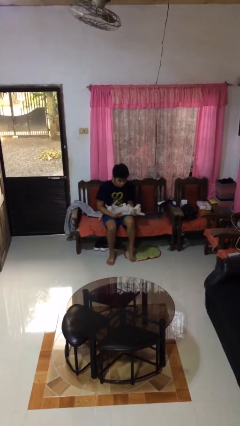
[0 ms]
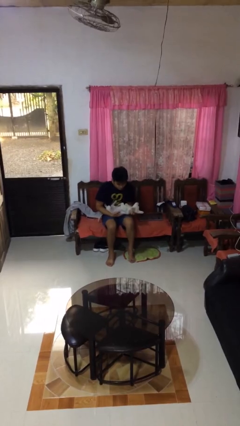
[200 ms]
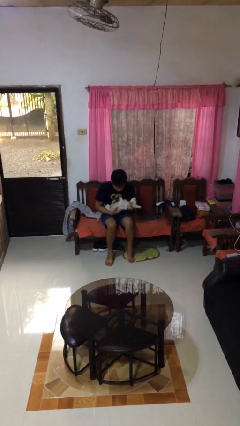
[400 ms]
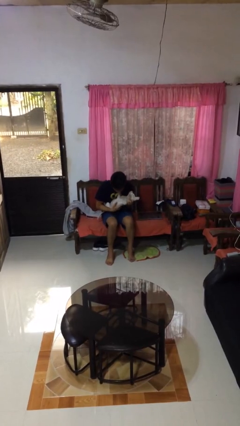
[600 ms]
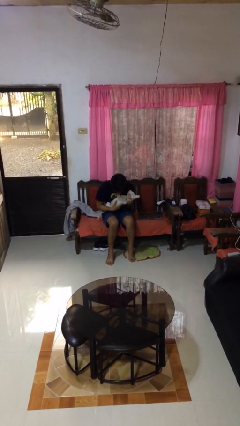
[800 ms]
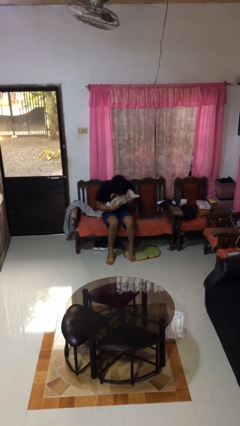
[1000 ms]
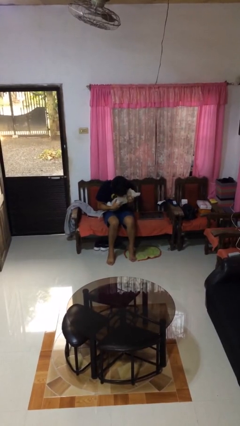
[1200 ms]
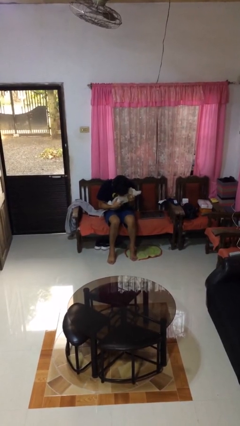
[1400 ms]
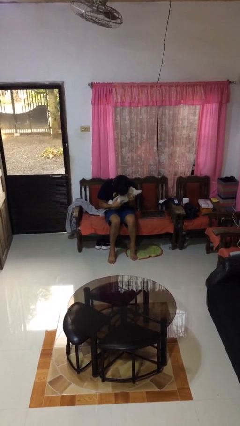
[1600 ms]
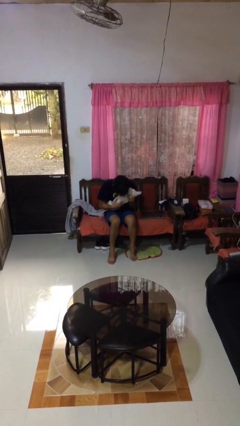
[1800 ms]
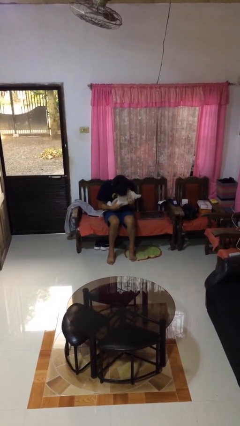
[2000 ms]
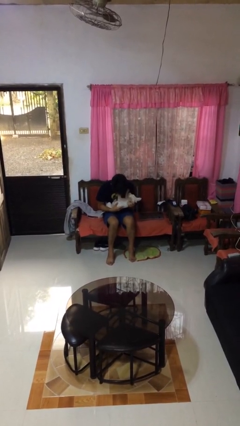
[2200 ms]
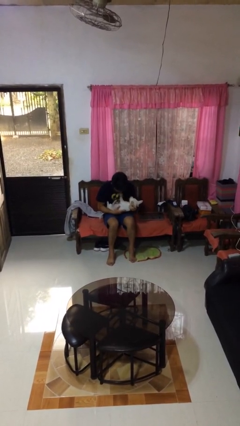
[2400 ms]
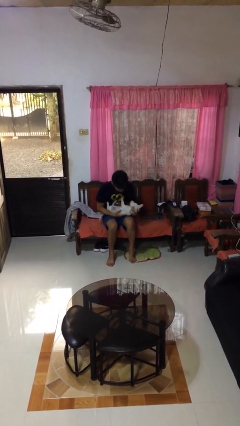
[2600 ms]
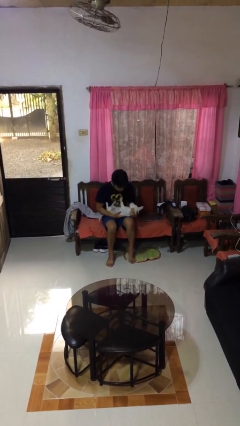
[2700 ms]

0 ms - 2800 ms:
person hugs dog

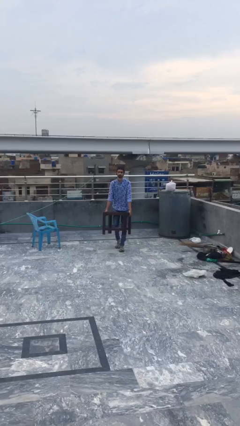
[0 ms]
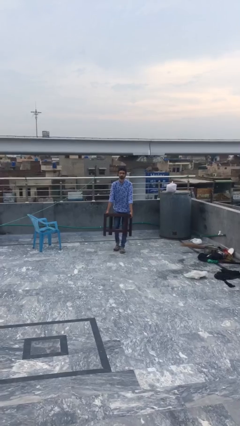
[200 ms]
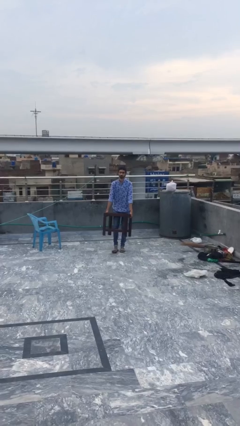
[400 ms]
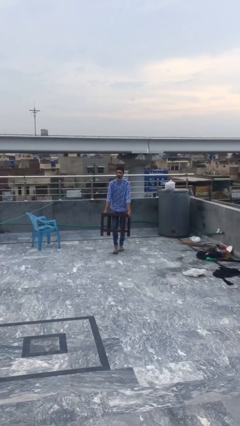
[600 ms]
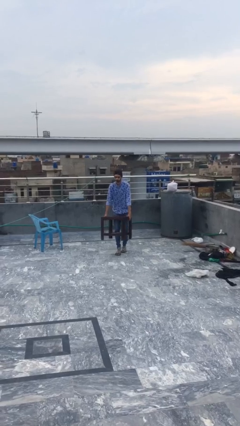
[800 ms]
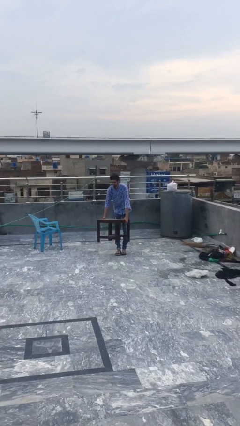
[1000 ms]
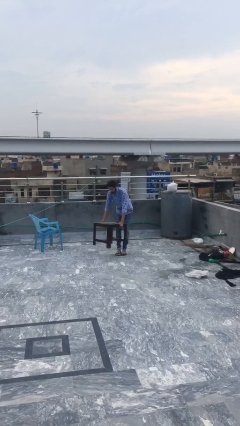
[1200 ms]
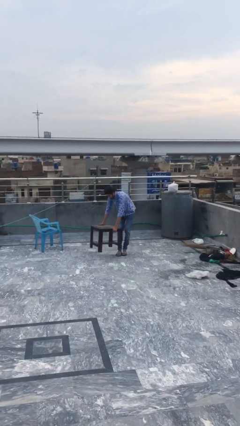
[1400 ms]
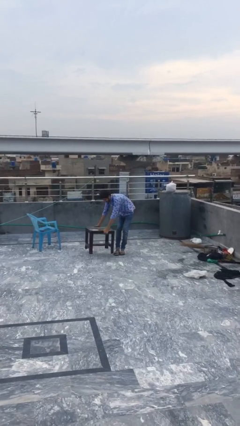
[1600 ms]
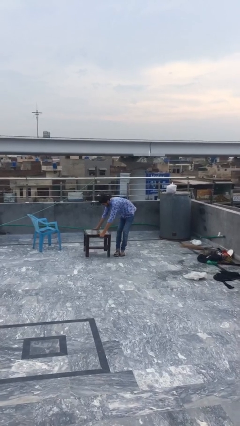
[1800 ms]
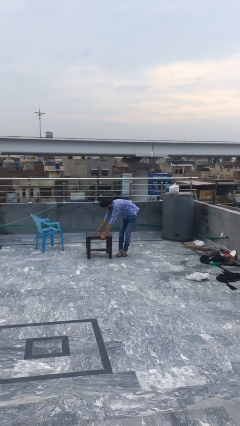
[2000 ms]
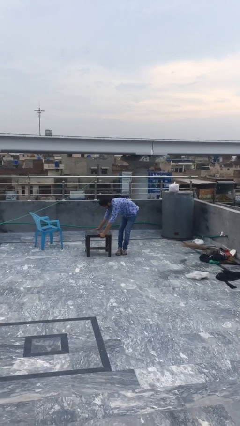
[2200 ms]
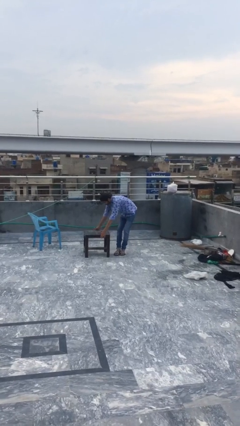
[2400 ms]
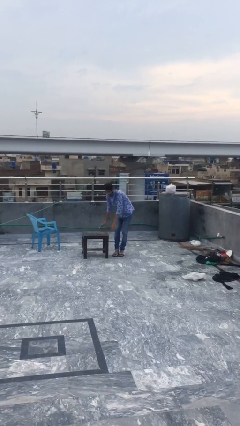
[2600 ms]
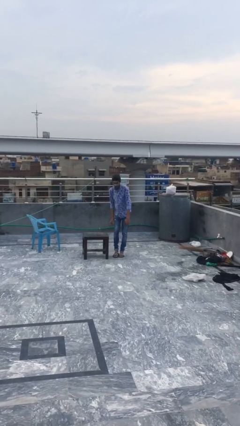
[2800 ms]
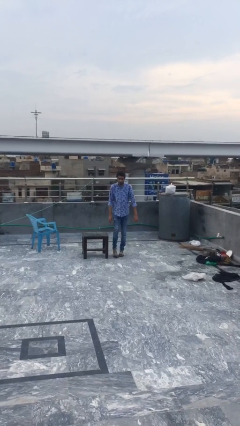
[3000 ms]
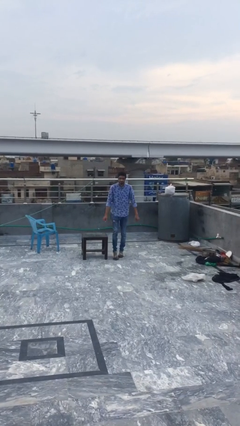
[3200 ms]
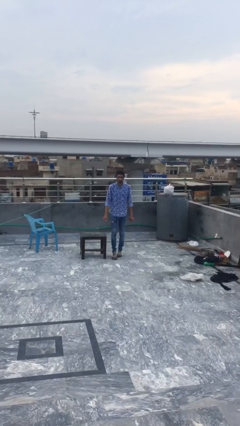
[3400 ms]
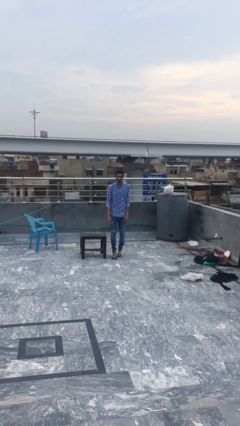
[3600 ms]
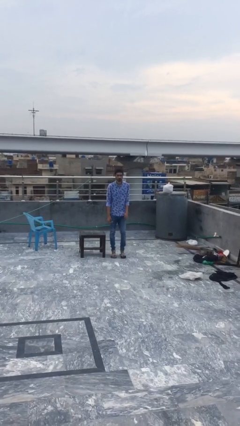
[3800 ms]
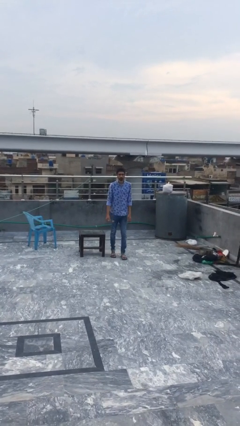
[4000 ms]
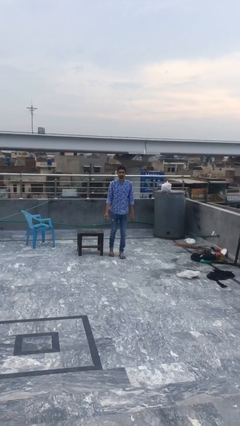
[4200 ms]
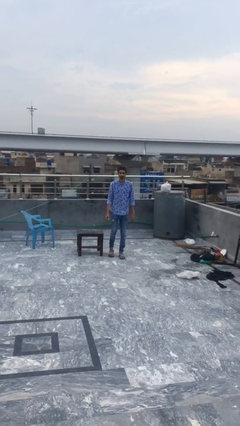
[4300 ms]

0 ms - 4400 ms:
person puts down object on floor

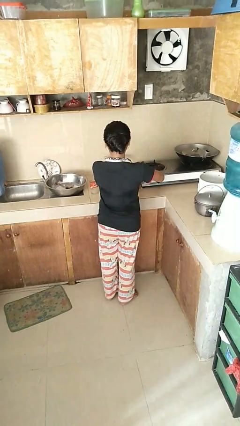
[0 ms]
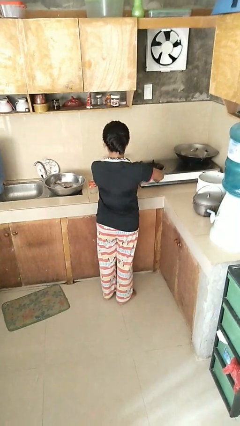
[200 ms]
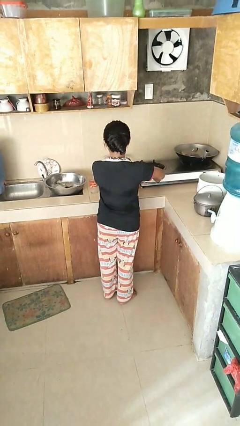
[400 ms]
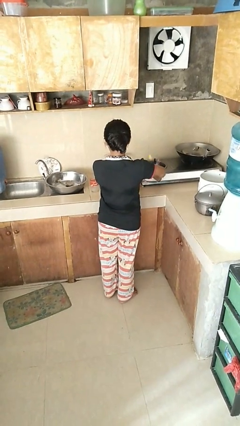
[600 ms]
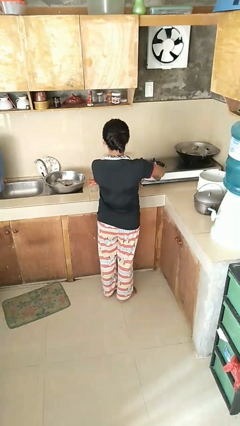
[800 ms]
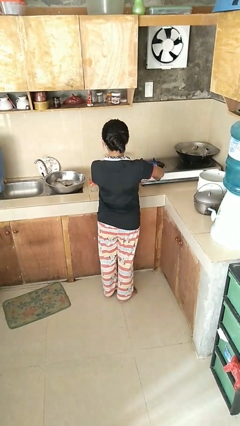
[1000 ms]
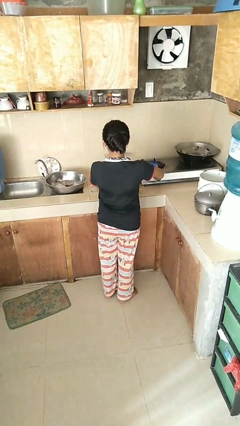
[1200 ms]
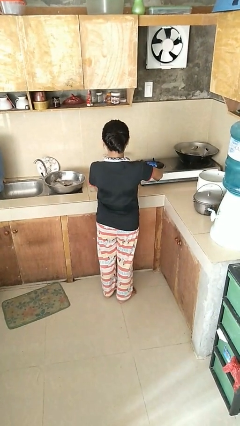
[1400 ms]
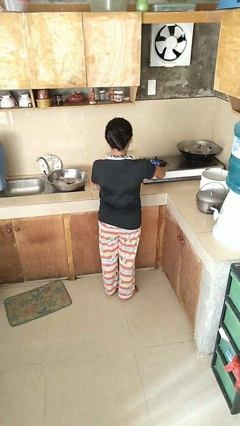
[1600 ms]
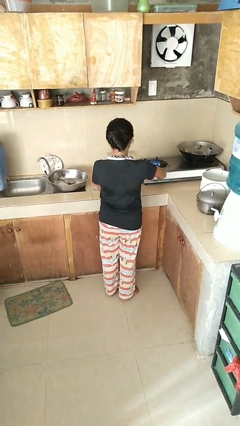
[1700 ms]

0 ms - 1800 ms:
person turns on stovetop

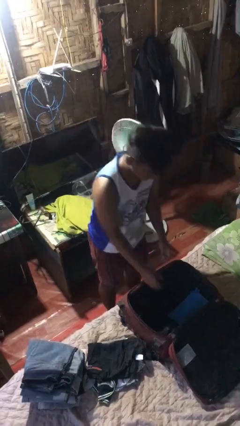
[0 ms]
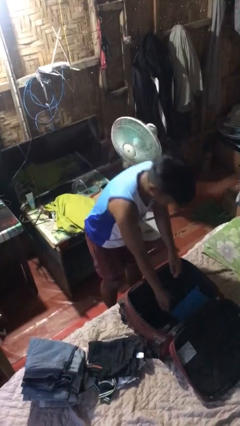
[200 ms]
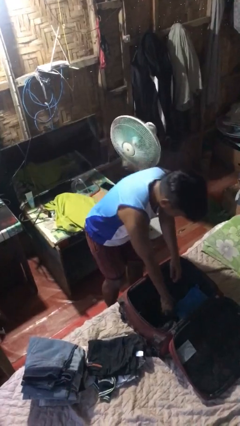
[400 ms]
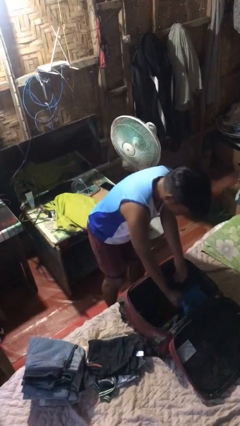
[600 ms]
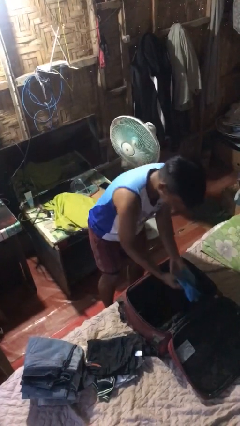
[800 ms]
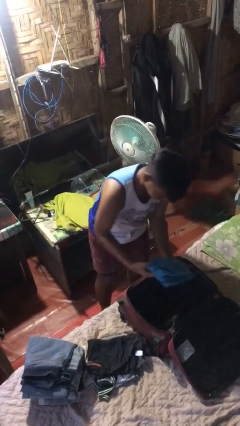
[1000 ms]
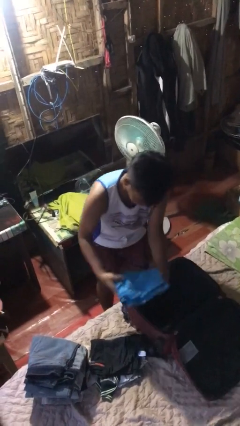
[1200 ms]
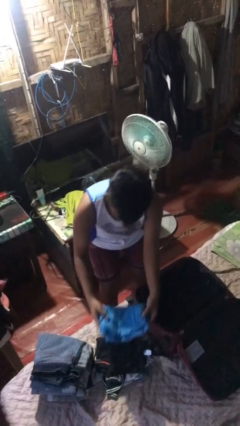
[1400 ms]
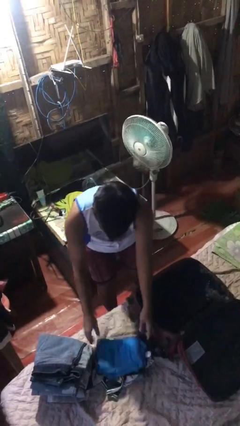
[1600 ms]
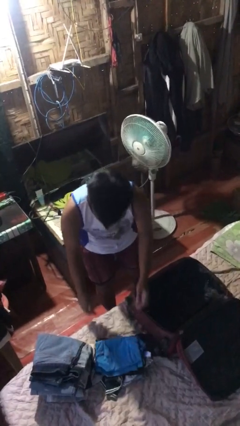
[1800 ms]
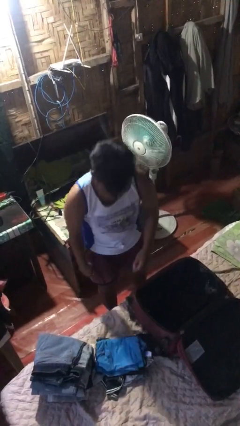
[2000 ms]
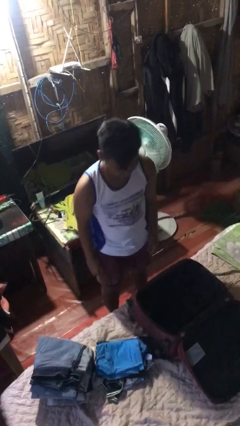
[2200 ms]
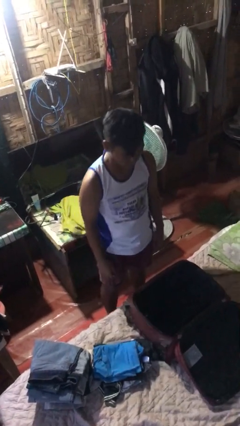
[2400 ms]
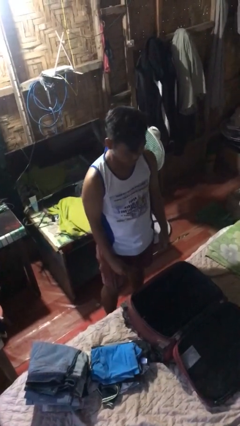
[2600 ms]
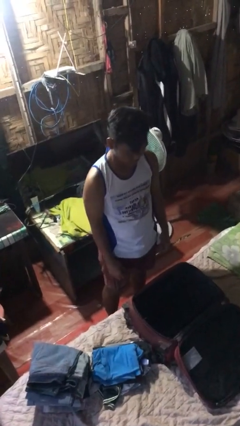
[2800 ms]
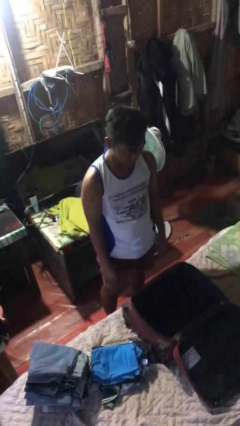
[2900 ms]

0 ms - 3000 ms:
person unloads clothes from suitcase

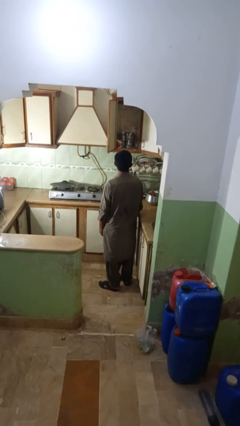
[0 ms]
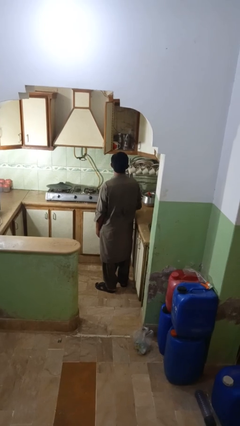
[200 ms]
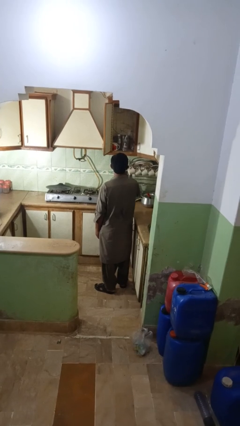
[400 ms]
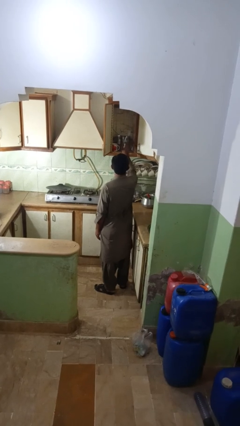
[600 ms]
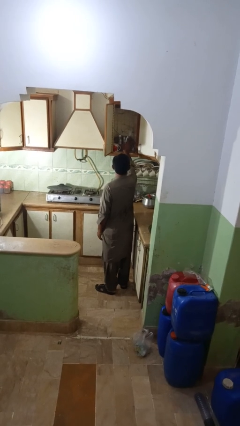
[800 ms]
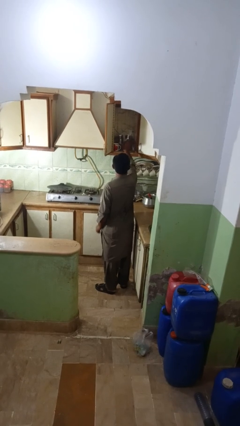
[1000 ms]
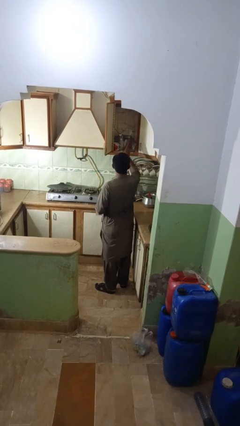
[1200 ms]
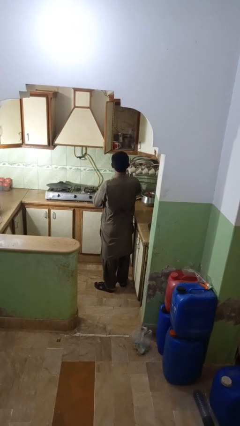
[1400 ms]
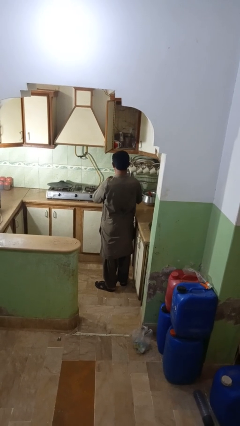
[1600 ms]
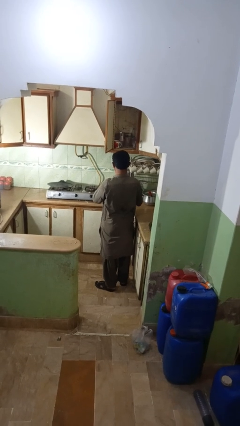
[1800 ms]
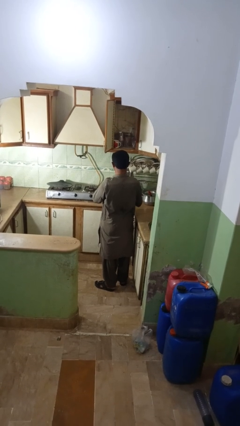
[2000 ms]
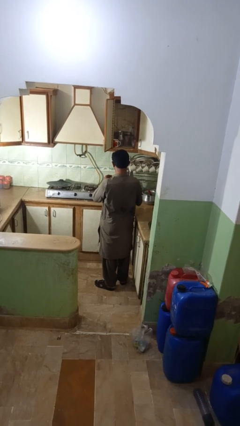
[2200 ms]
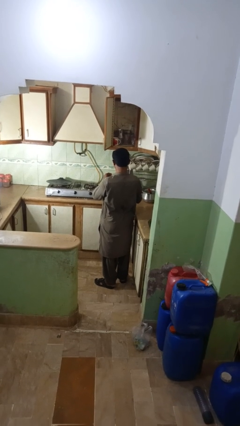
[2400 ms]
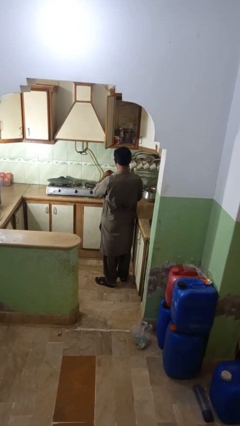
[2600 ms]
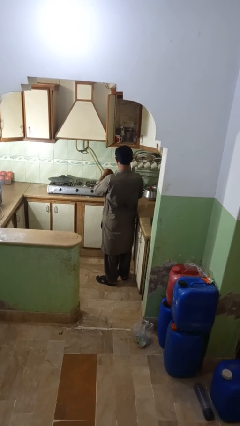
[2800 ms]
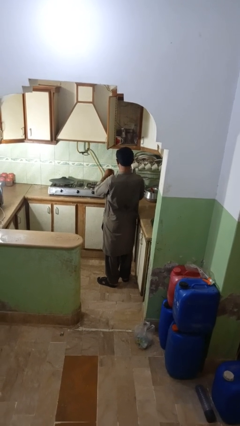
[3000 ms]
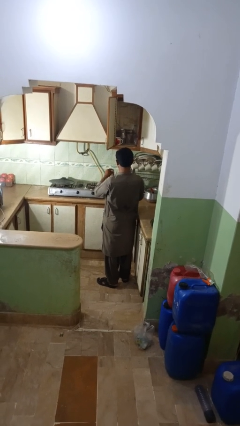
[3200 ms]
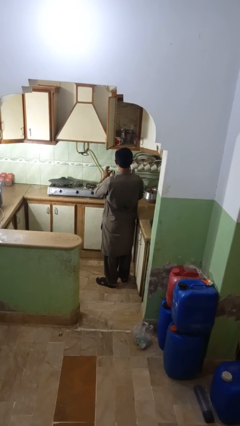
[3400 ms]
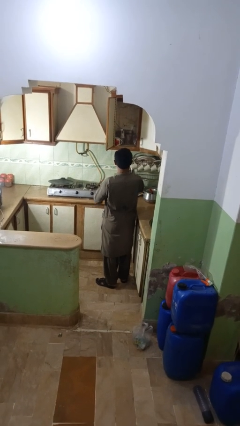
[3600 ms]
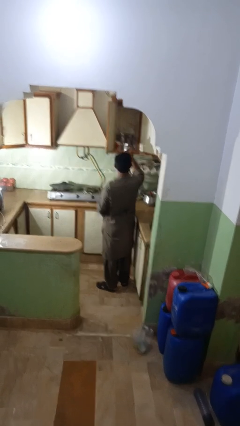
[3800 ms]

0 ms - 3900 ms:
person takes object from kitchen drawer

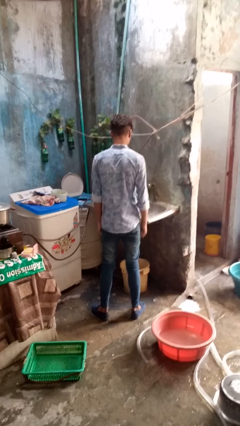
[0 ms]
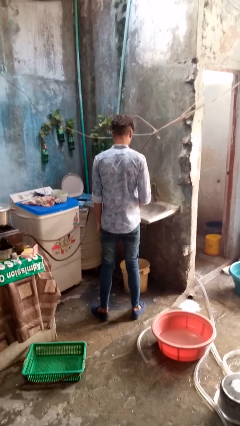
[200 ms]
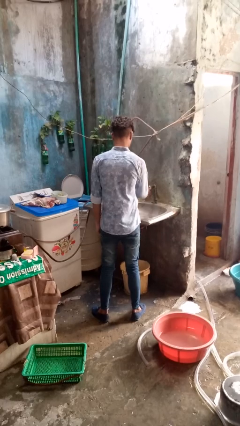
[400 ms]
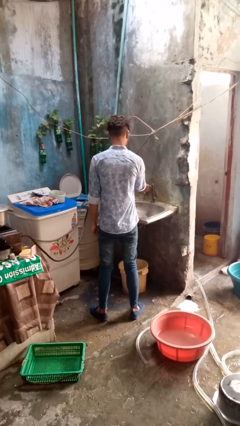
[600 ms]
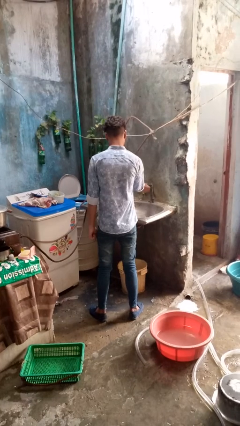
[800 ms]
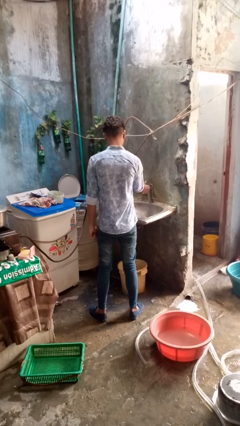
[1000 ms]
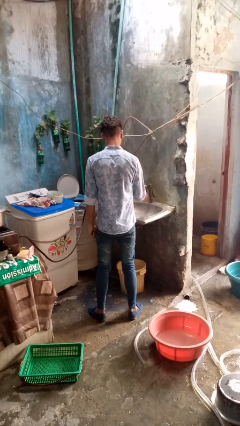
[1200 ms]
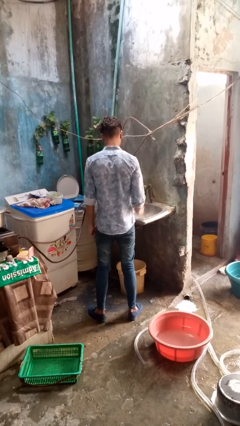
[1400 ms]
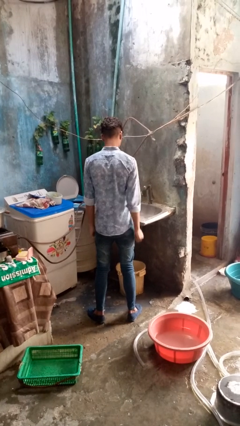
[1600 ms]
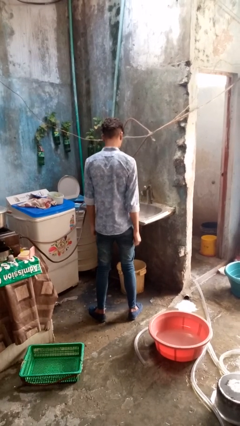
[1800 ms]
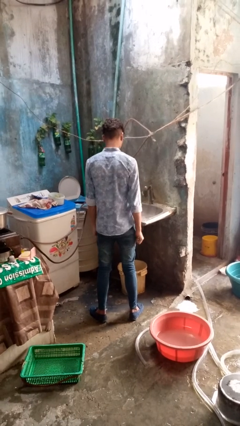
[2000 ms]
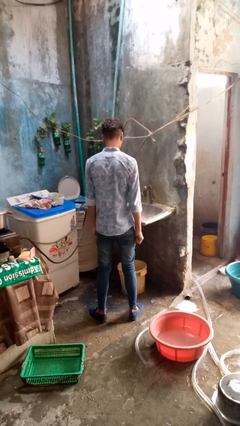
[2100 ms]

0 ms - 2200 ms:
person turns on faucet
